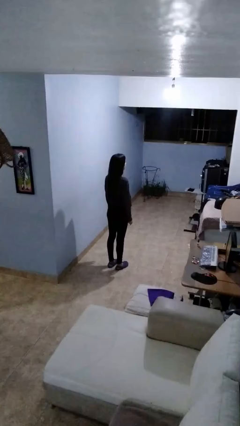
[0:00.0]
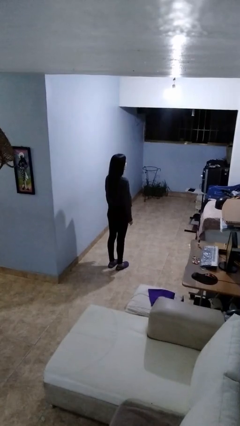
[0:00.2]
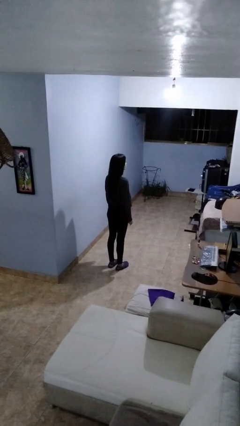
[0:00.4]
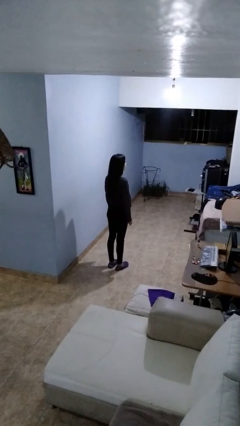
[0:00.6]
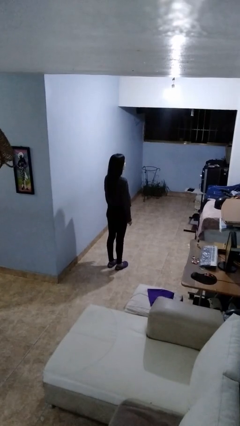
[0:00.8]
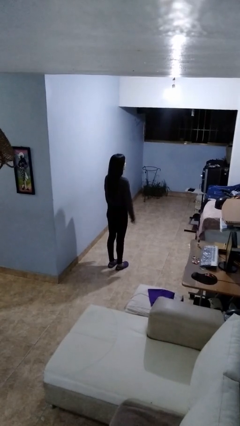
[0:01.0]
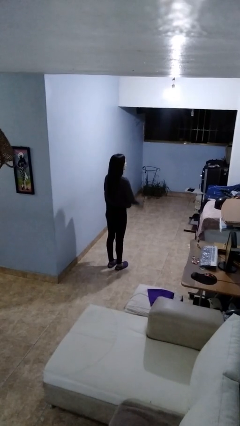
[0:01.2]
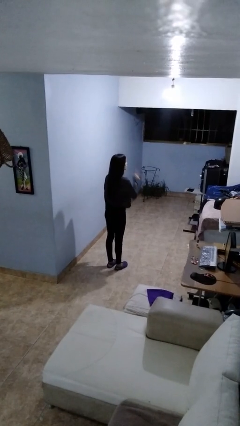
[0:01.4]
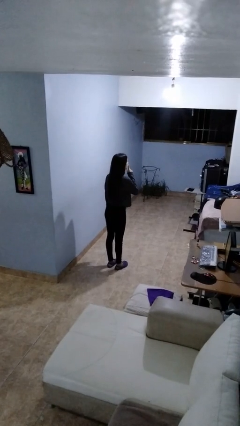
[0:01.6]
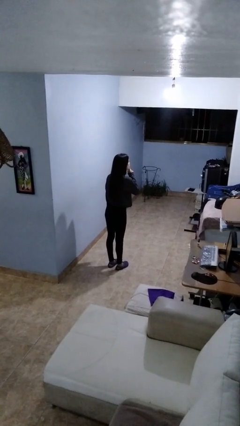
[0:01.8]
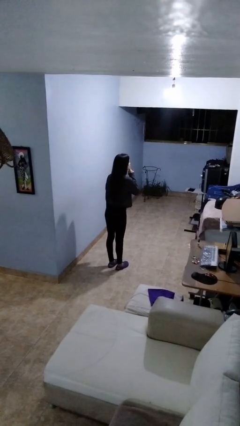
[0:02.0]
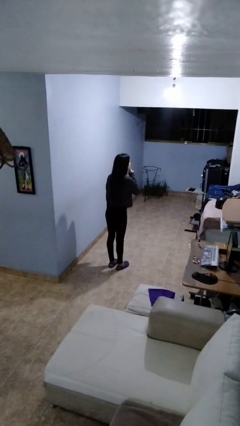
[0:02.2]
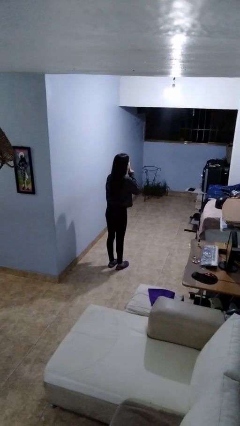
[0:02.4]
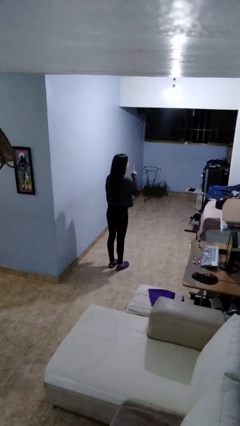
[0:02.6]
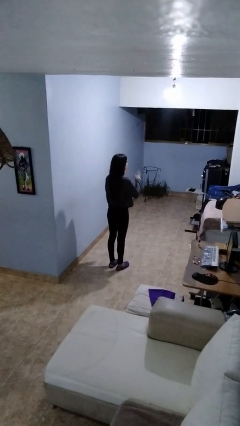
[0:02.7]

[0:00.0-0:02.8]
person gestures be quiet

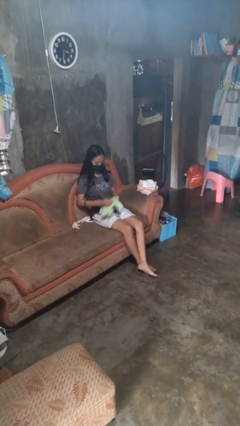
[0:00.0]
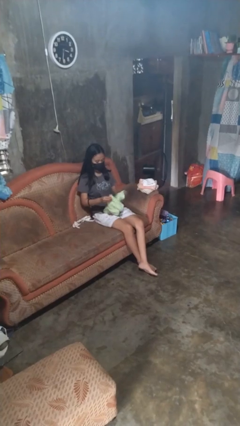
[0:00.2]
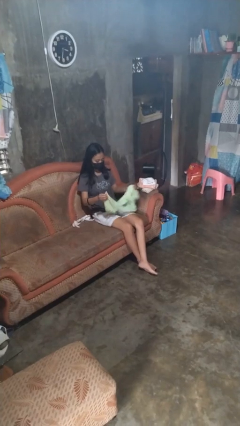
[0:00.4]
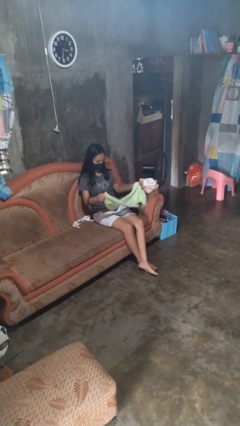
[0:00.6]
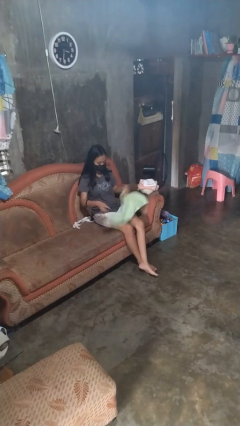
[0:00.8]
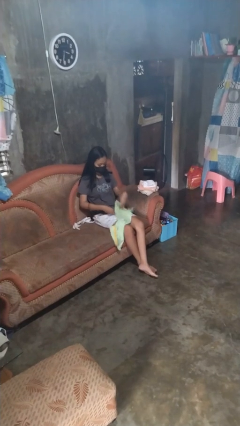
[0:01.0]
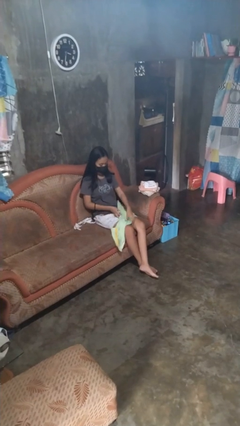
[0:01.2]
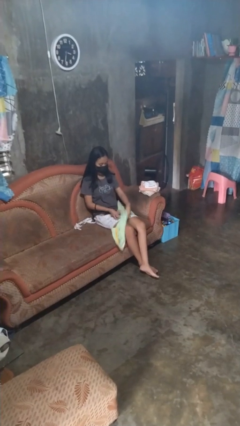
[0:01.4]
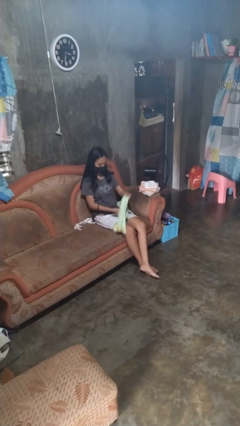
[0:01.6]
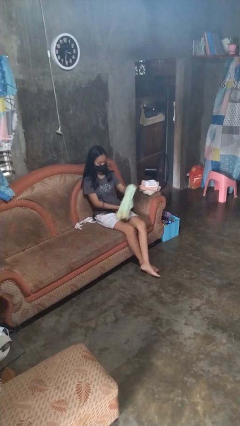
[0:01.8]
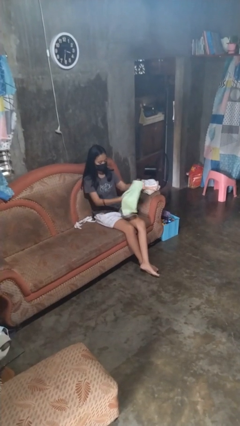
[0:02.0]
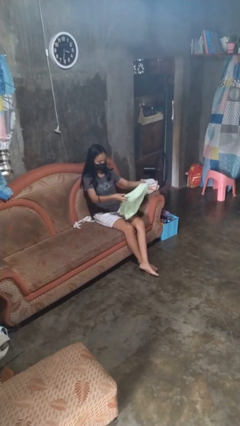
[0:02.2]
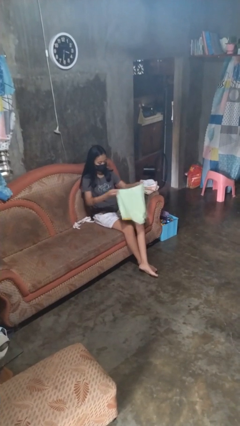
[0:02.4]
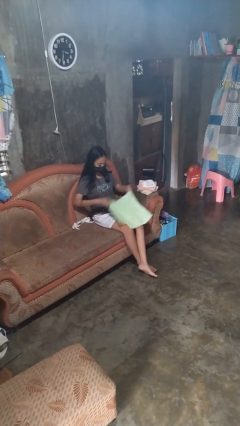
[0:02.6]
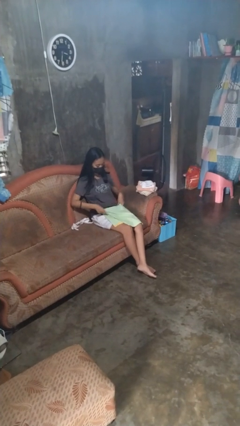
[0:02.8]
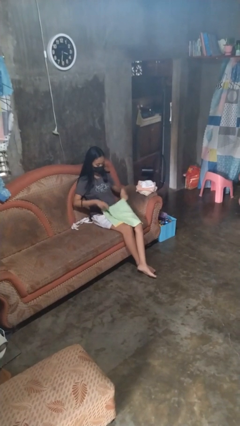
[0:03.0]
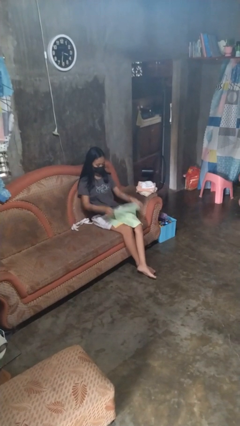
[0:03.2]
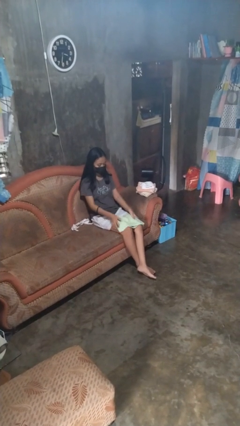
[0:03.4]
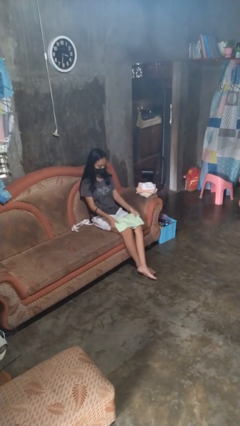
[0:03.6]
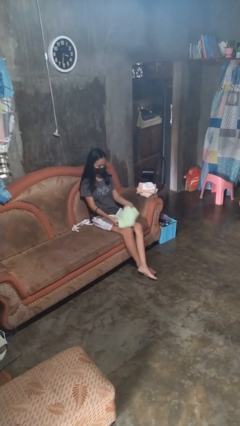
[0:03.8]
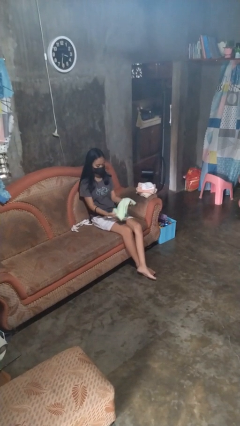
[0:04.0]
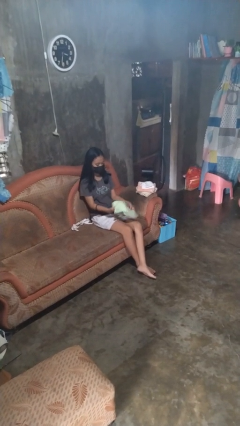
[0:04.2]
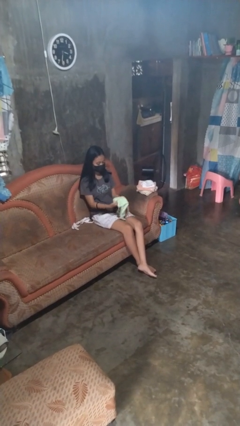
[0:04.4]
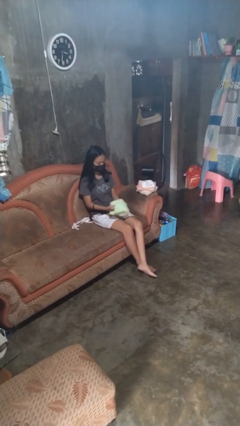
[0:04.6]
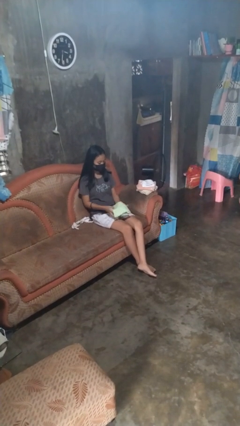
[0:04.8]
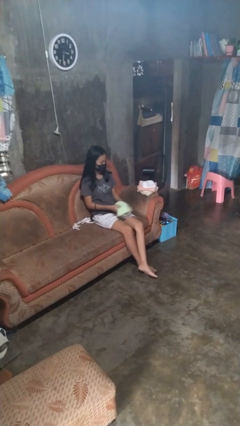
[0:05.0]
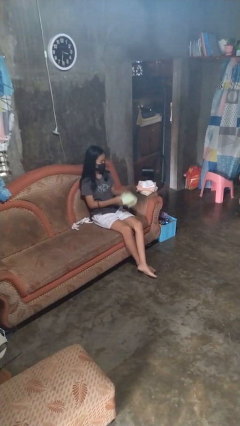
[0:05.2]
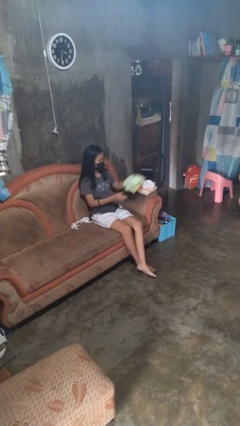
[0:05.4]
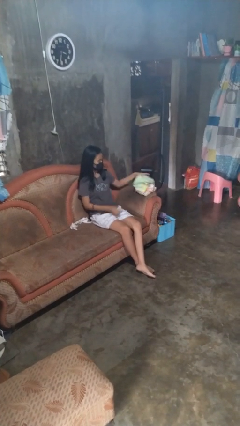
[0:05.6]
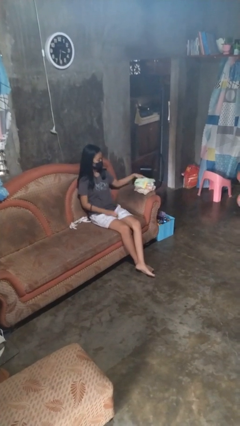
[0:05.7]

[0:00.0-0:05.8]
person folds towel

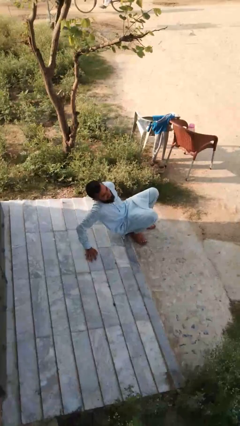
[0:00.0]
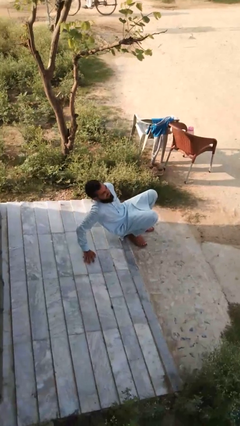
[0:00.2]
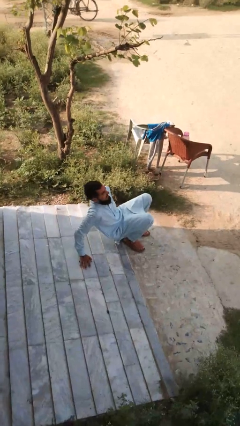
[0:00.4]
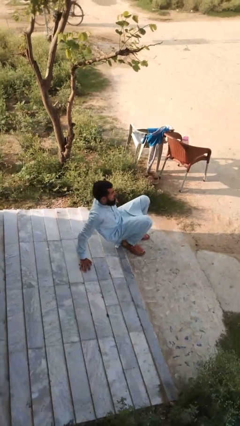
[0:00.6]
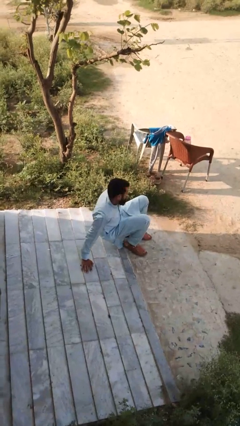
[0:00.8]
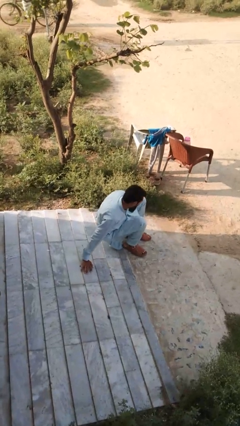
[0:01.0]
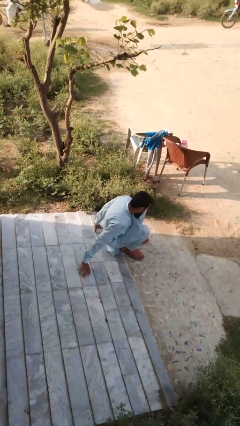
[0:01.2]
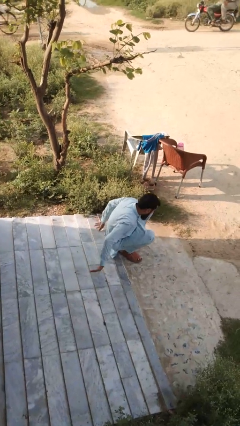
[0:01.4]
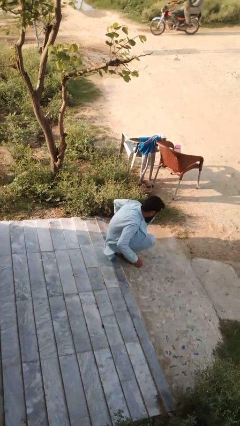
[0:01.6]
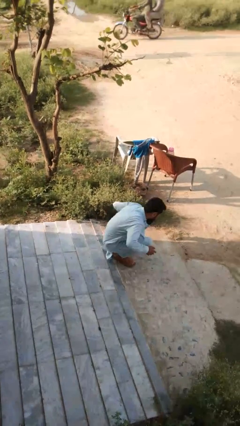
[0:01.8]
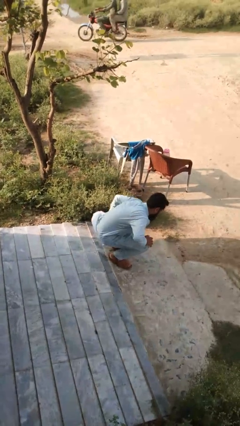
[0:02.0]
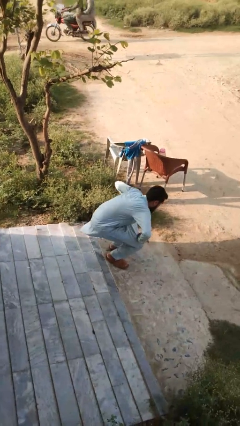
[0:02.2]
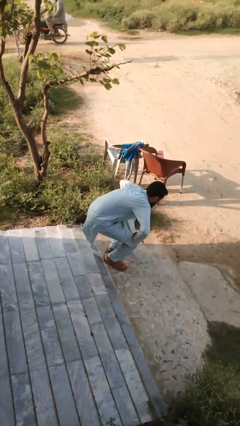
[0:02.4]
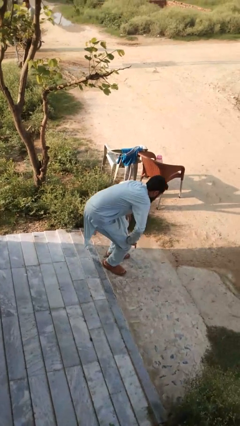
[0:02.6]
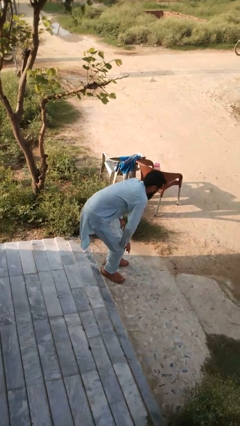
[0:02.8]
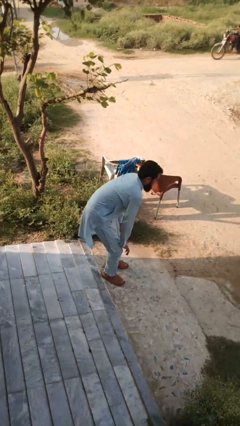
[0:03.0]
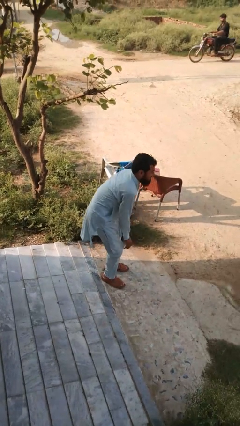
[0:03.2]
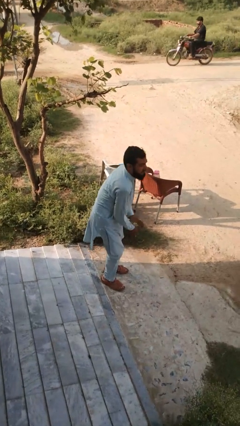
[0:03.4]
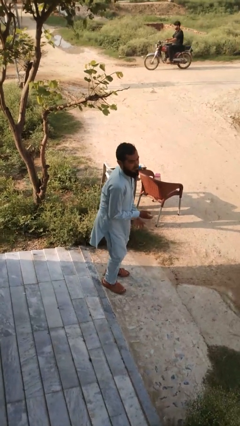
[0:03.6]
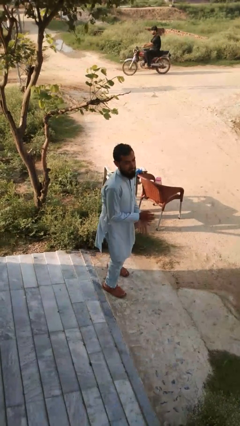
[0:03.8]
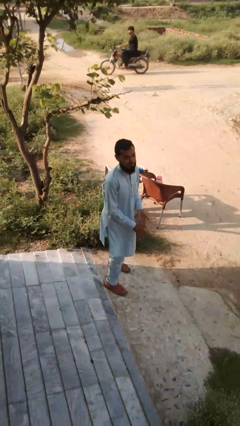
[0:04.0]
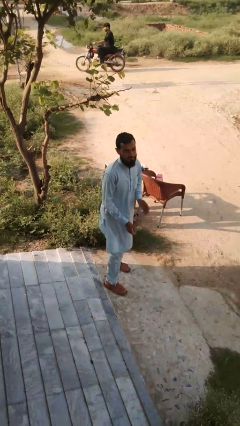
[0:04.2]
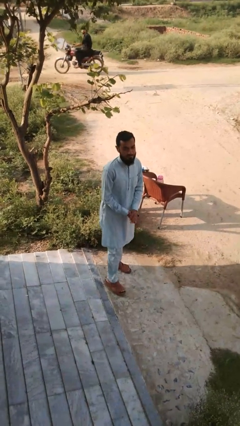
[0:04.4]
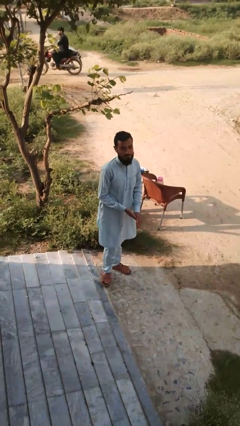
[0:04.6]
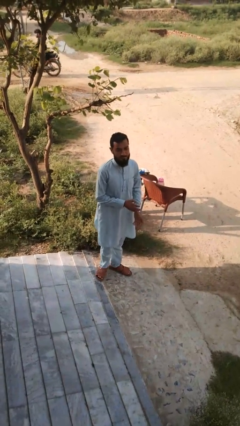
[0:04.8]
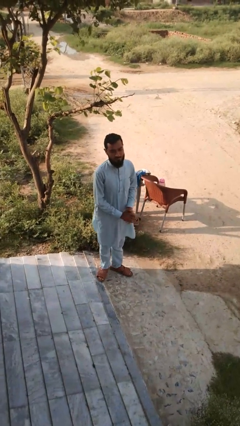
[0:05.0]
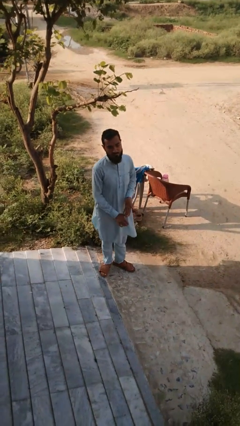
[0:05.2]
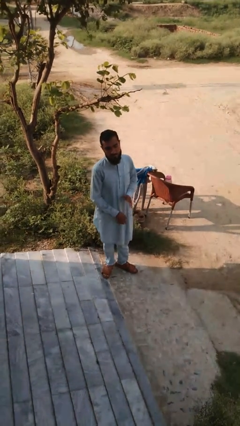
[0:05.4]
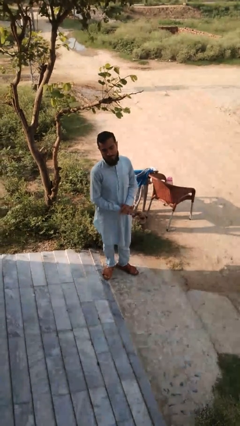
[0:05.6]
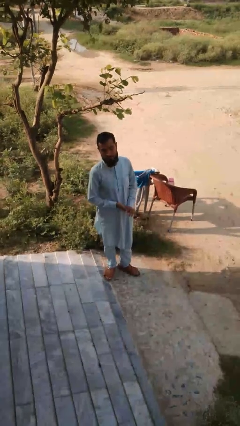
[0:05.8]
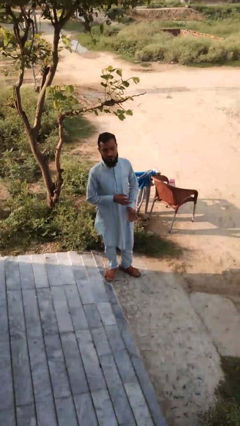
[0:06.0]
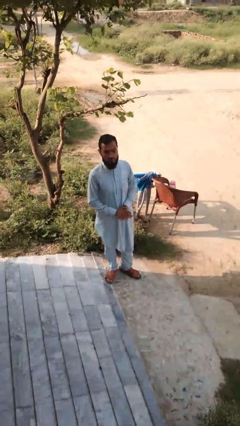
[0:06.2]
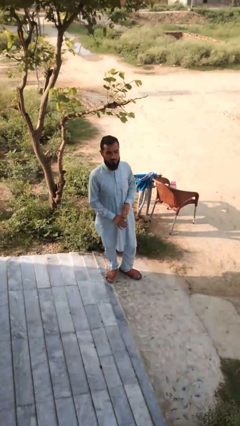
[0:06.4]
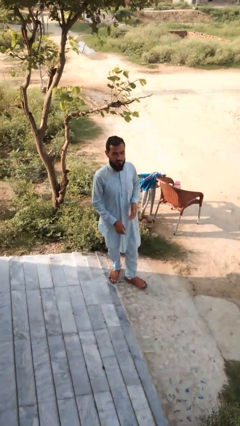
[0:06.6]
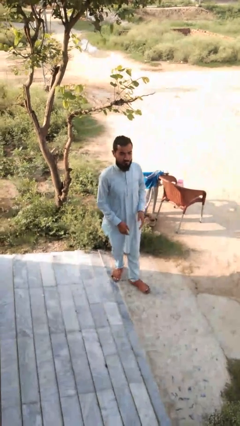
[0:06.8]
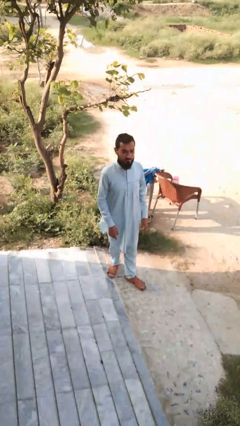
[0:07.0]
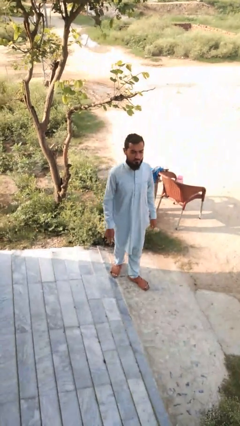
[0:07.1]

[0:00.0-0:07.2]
person stands up from floor

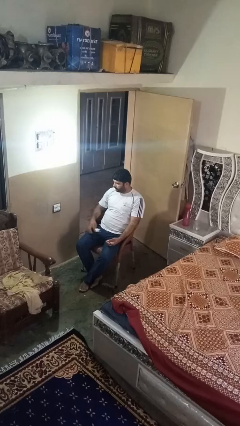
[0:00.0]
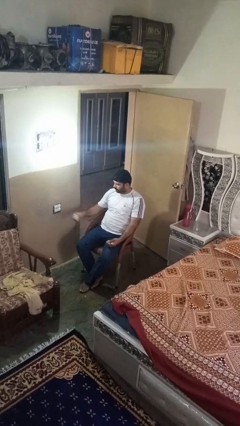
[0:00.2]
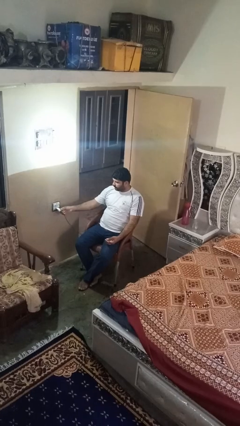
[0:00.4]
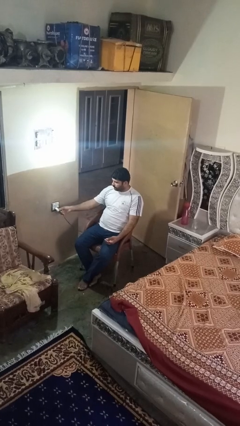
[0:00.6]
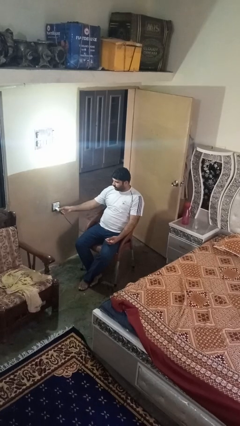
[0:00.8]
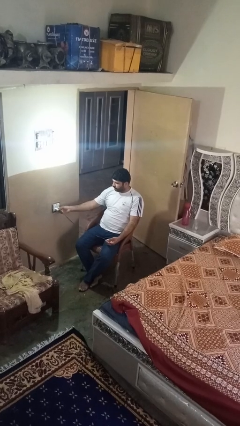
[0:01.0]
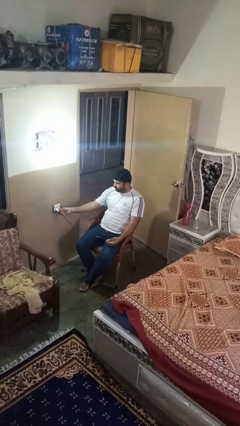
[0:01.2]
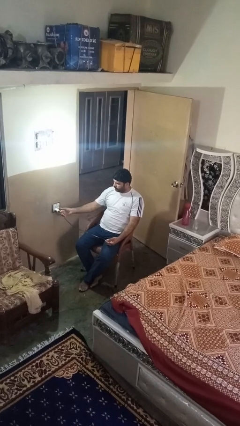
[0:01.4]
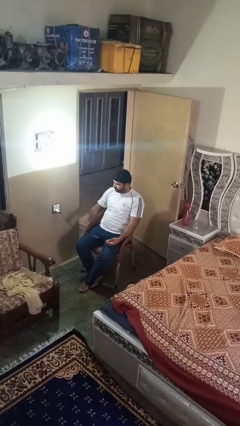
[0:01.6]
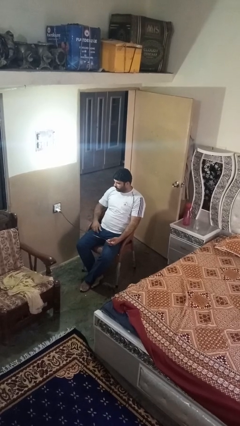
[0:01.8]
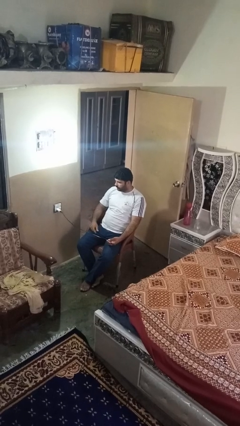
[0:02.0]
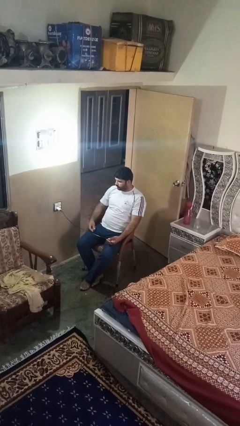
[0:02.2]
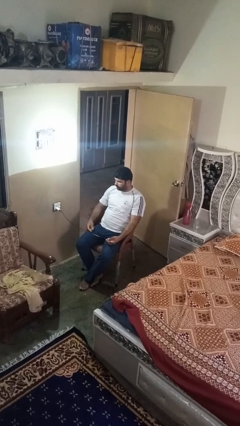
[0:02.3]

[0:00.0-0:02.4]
person plugs into electrical socket
